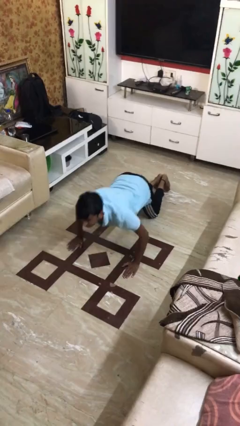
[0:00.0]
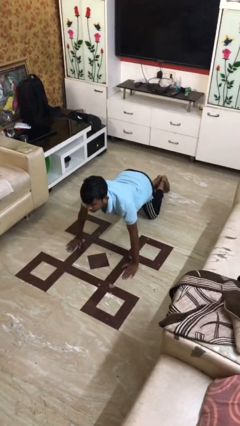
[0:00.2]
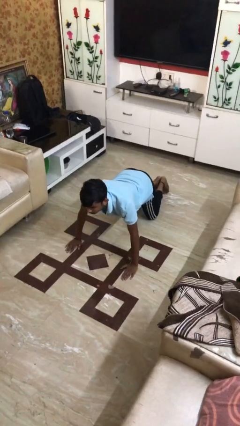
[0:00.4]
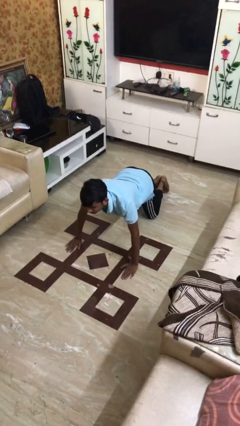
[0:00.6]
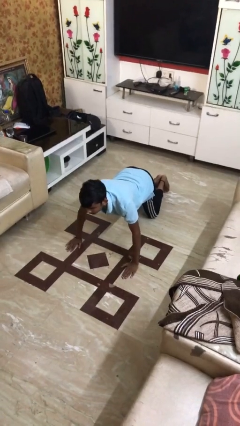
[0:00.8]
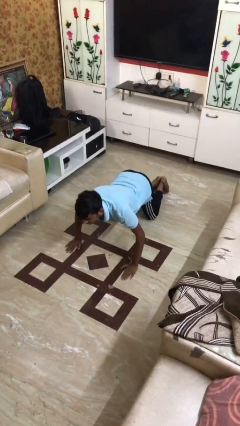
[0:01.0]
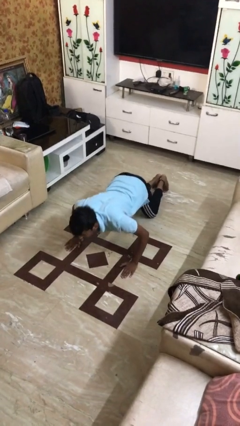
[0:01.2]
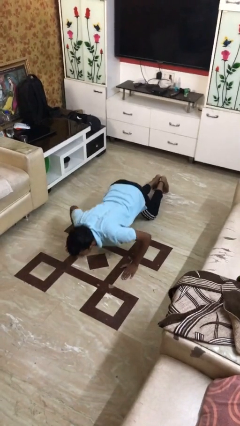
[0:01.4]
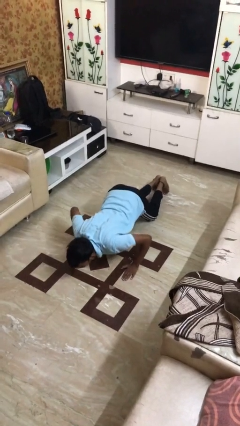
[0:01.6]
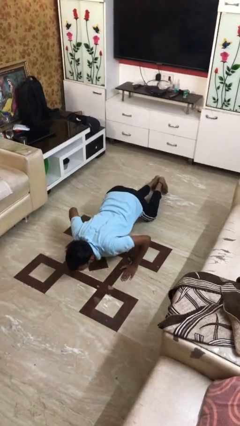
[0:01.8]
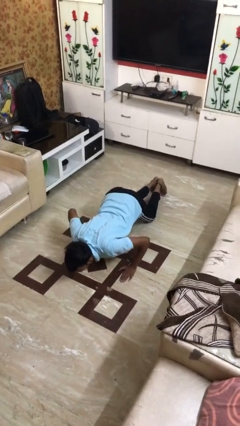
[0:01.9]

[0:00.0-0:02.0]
person exercises with pushup

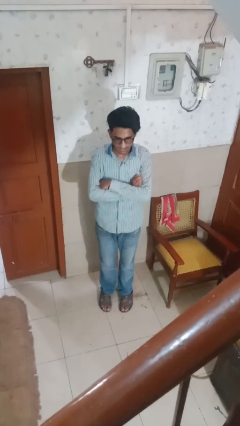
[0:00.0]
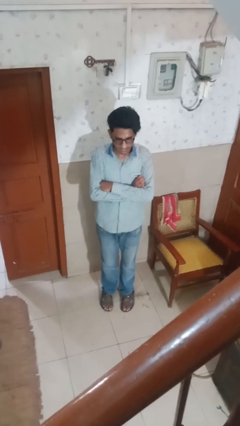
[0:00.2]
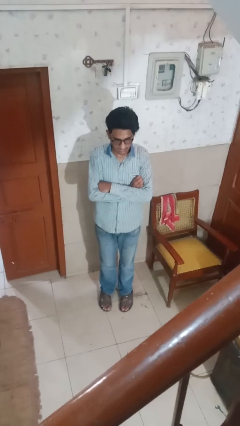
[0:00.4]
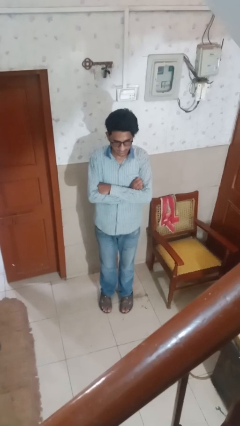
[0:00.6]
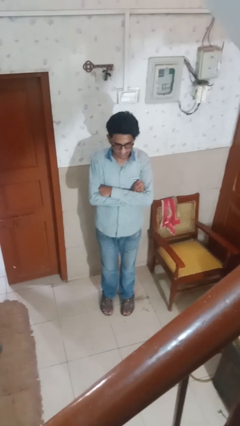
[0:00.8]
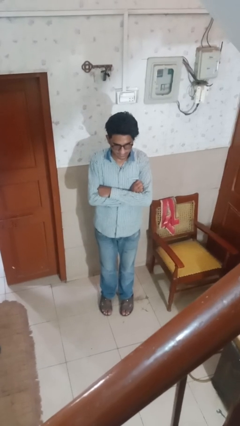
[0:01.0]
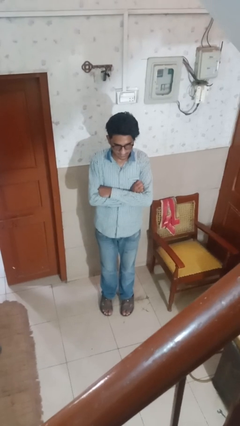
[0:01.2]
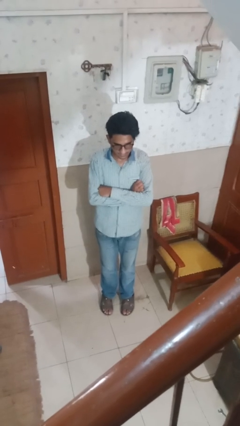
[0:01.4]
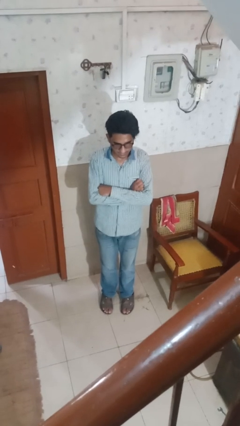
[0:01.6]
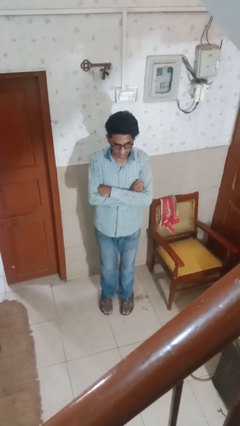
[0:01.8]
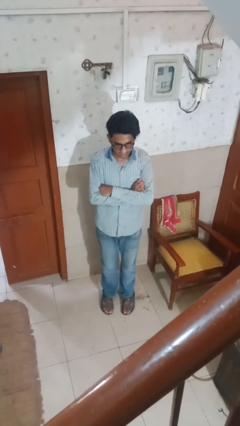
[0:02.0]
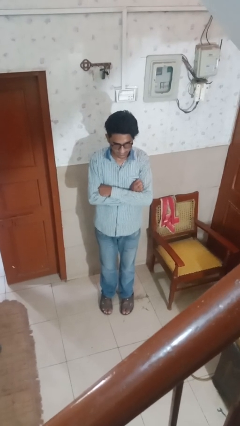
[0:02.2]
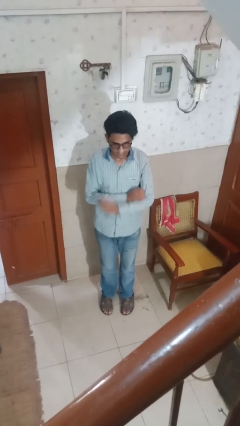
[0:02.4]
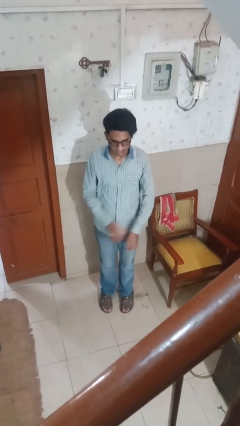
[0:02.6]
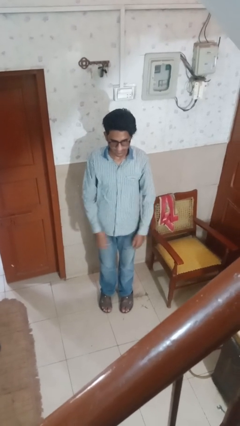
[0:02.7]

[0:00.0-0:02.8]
person crosses arms

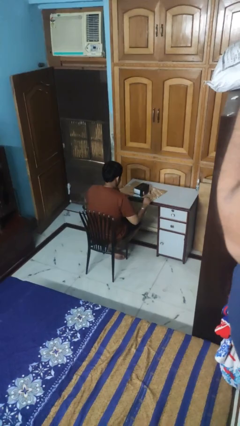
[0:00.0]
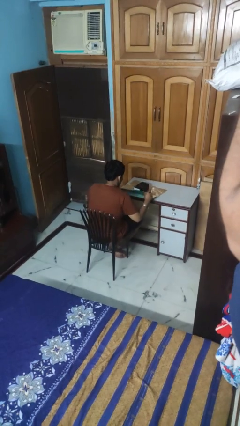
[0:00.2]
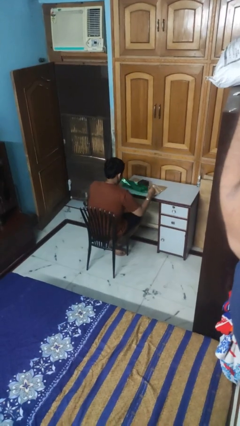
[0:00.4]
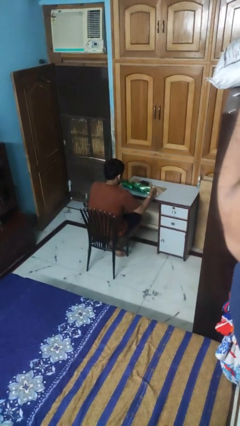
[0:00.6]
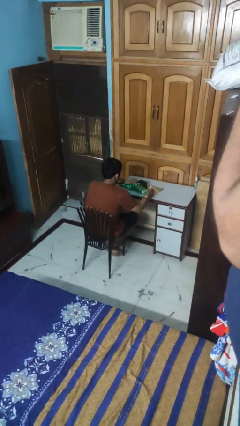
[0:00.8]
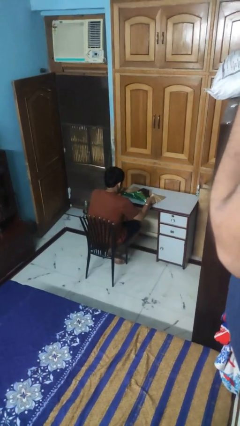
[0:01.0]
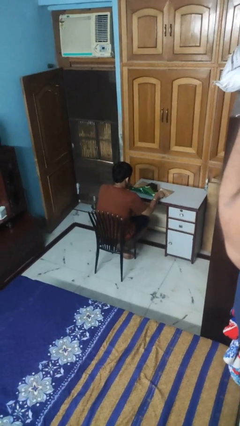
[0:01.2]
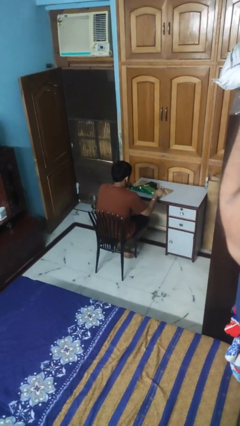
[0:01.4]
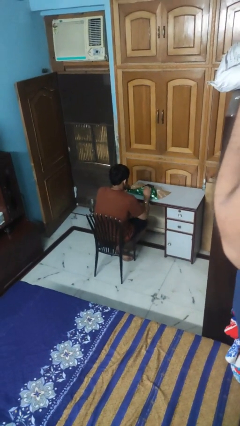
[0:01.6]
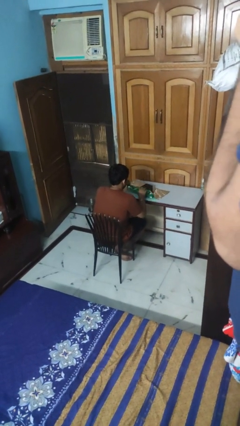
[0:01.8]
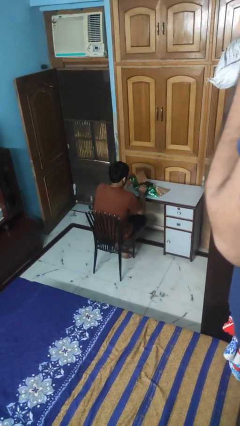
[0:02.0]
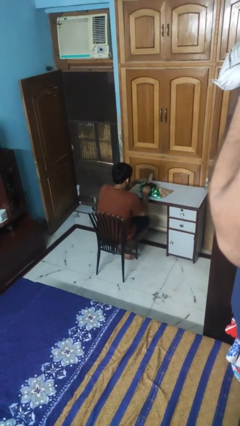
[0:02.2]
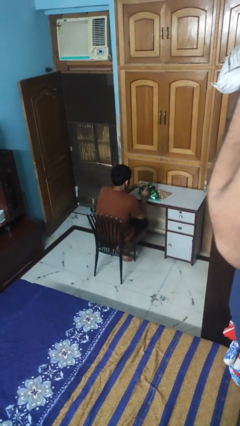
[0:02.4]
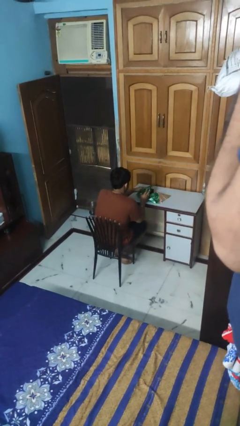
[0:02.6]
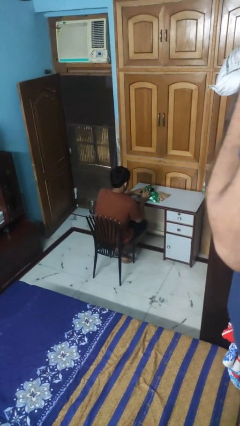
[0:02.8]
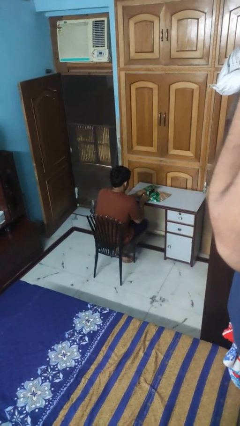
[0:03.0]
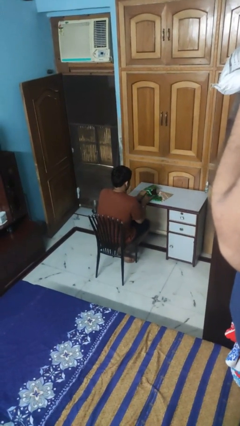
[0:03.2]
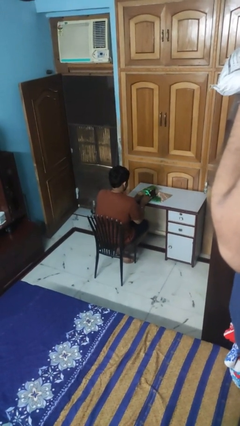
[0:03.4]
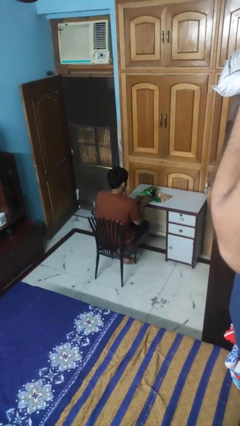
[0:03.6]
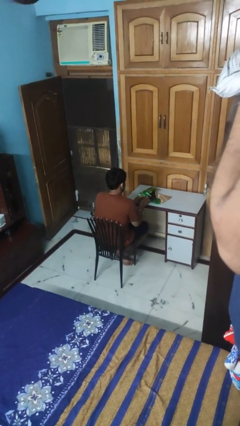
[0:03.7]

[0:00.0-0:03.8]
person wraps box

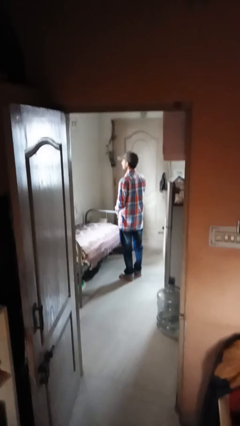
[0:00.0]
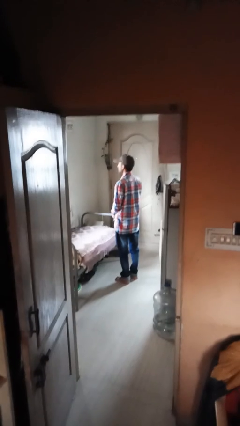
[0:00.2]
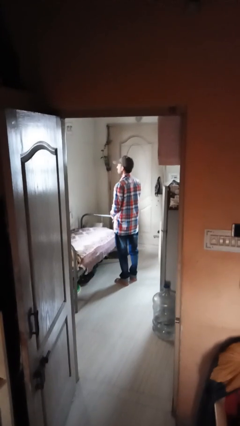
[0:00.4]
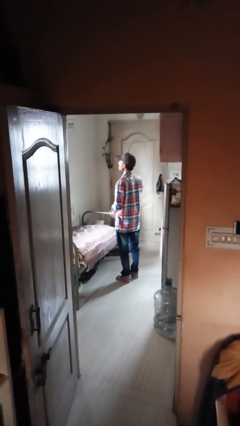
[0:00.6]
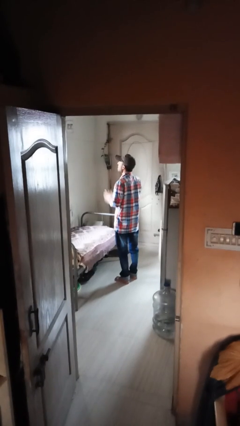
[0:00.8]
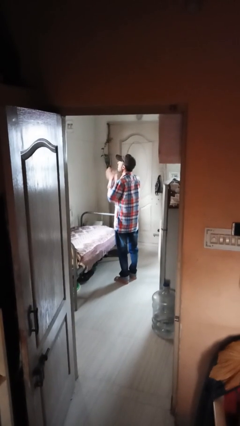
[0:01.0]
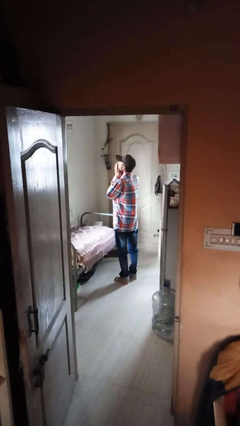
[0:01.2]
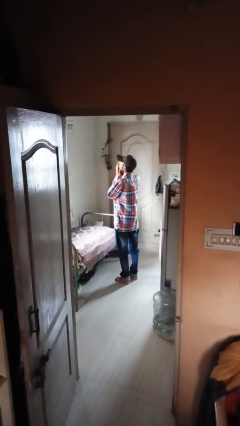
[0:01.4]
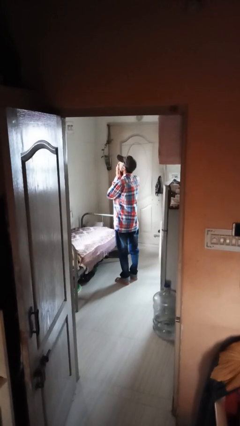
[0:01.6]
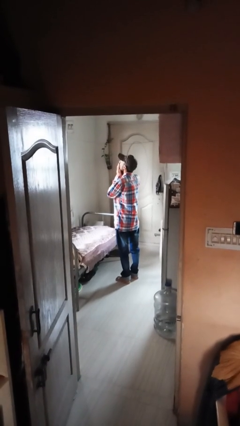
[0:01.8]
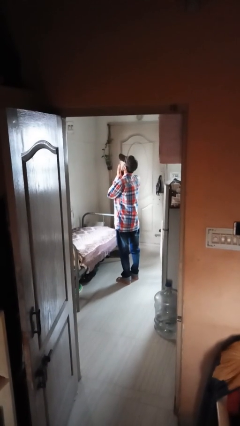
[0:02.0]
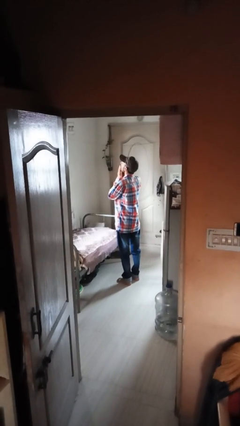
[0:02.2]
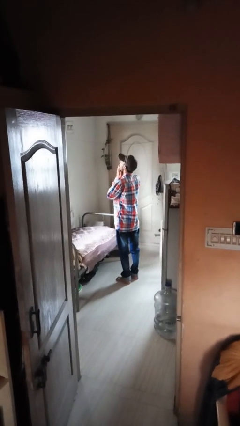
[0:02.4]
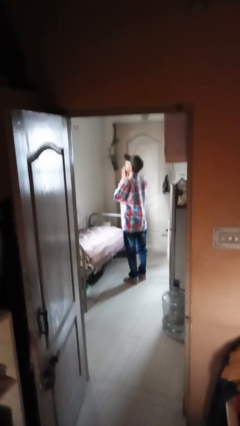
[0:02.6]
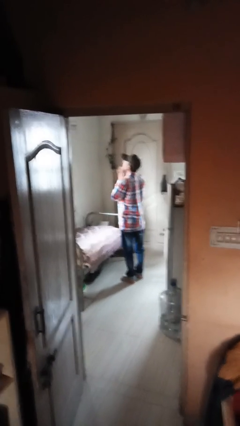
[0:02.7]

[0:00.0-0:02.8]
person yawns

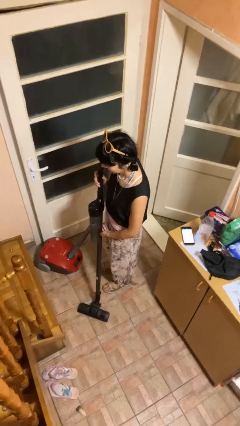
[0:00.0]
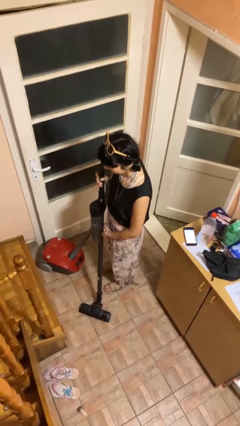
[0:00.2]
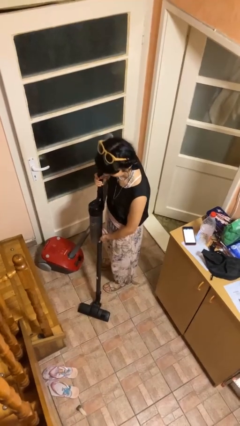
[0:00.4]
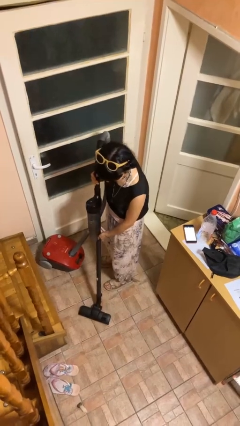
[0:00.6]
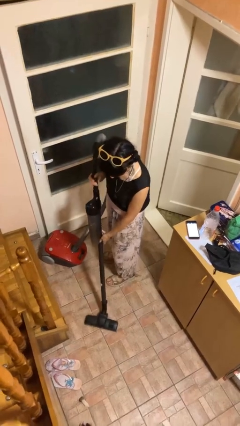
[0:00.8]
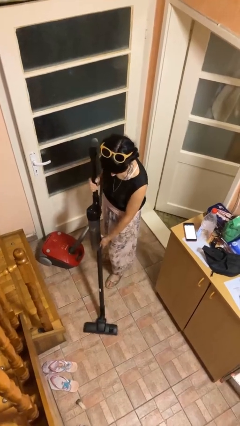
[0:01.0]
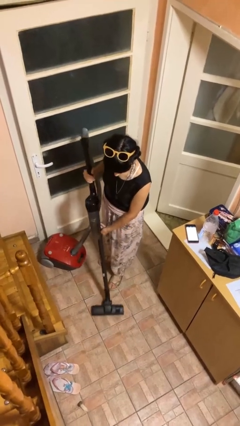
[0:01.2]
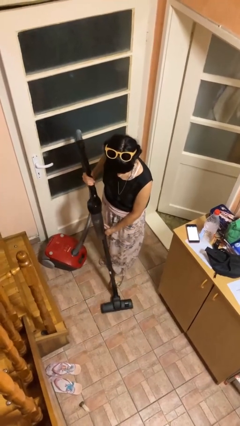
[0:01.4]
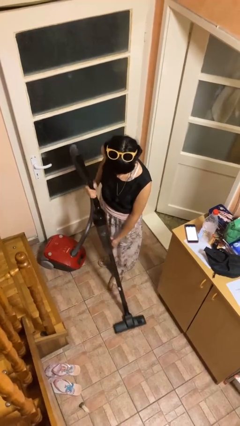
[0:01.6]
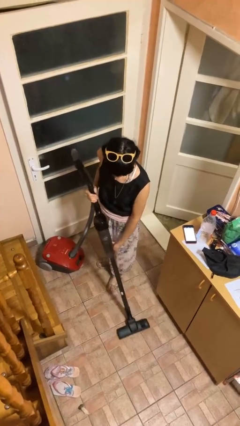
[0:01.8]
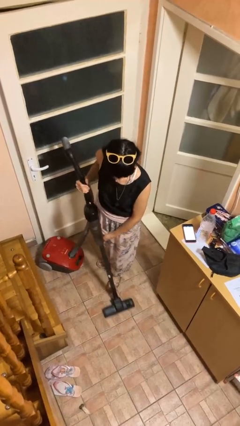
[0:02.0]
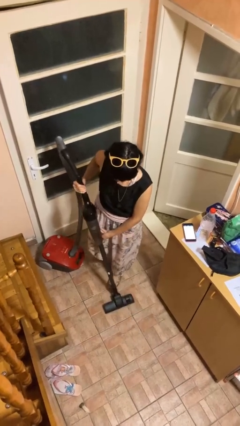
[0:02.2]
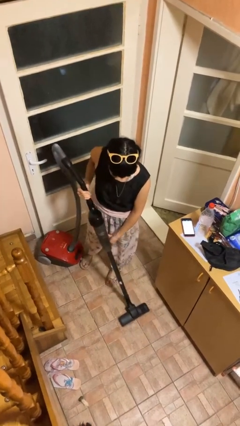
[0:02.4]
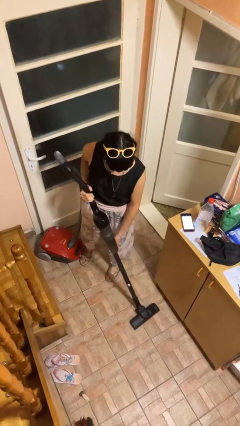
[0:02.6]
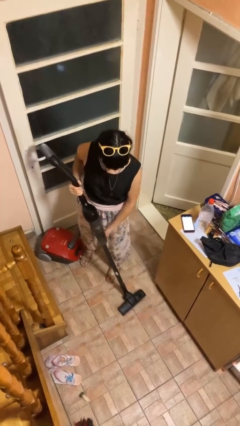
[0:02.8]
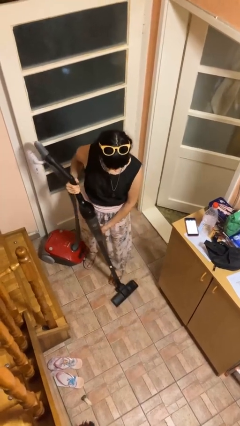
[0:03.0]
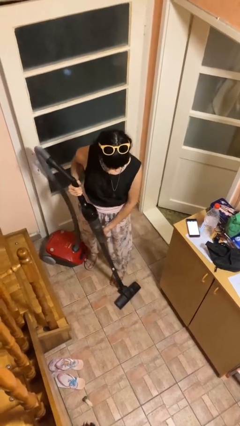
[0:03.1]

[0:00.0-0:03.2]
person vacuums carpet

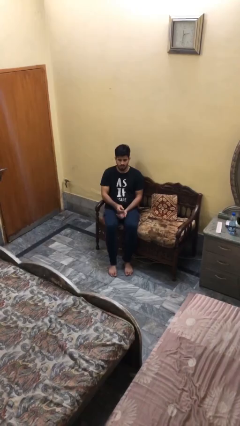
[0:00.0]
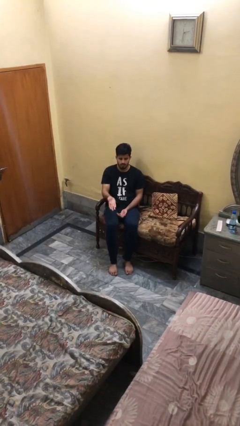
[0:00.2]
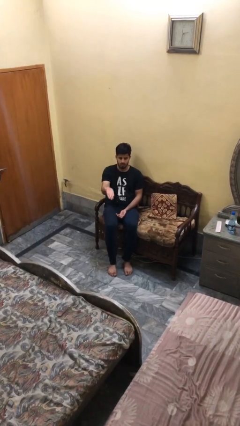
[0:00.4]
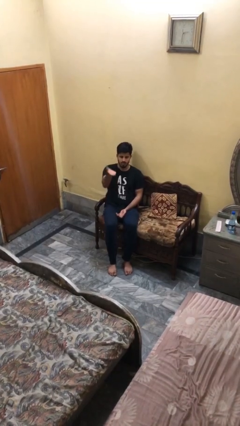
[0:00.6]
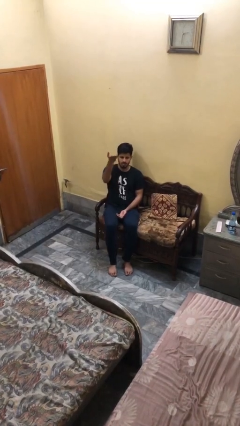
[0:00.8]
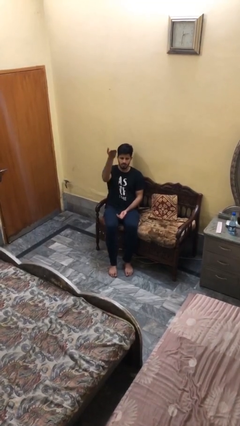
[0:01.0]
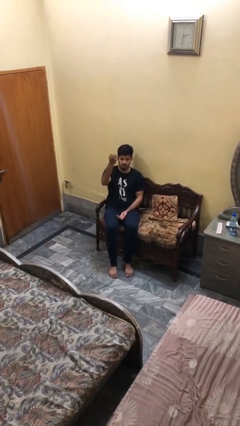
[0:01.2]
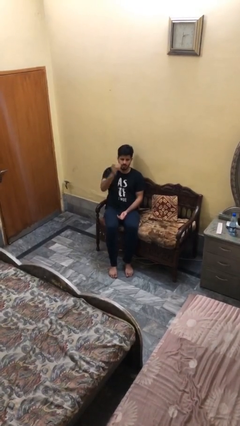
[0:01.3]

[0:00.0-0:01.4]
person gestures swipe up

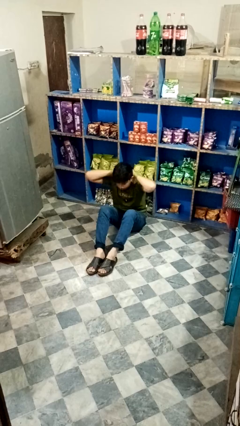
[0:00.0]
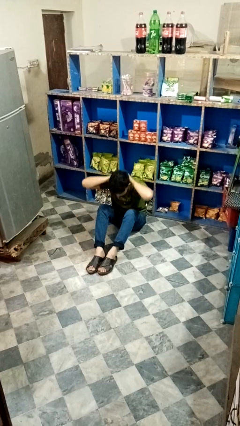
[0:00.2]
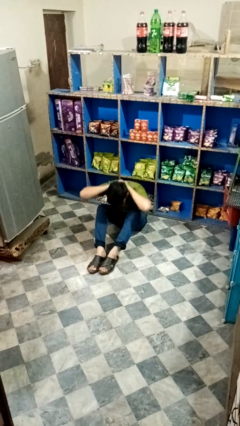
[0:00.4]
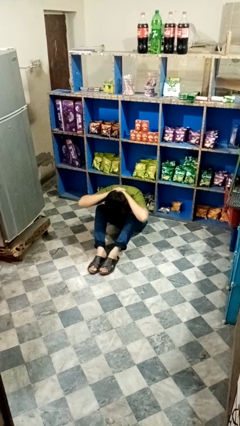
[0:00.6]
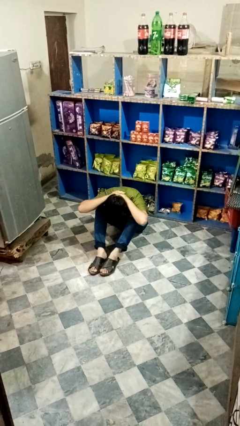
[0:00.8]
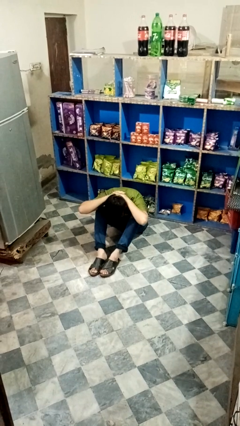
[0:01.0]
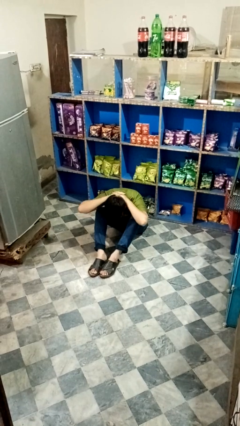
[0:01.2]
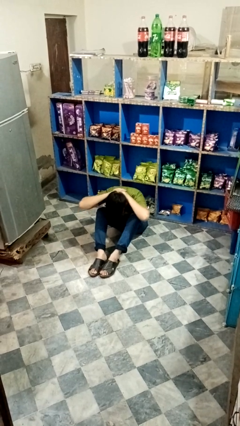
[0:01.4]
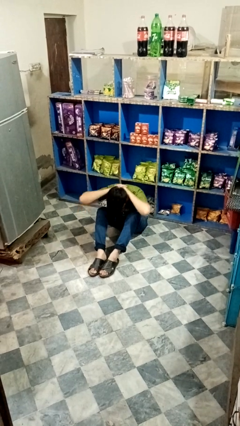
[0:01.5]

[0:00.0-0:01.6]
person exercises with situp
